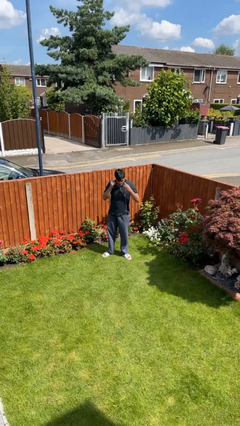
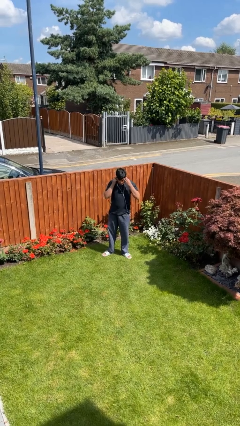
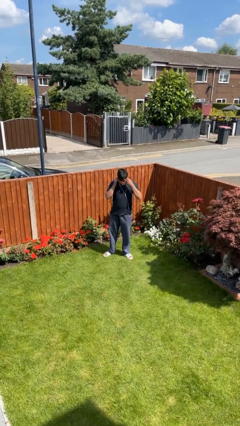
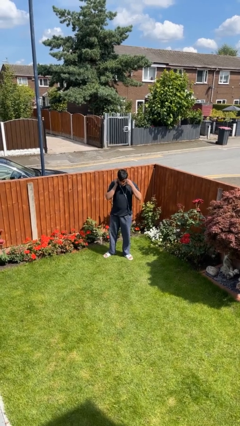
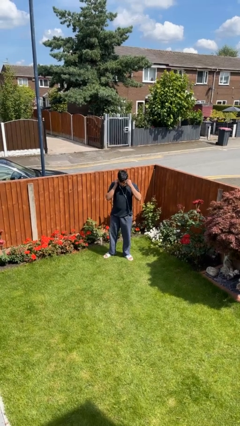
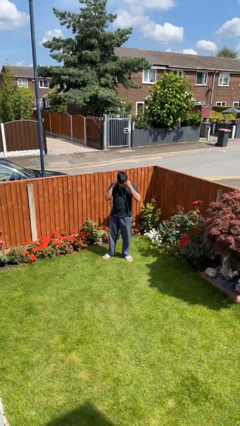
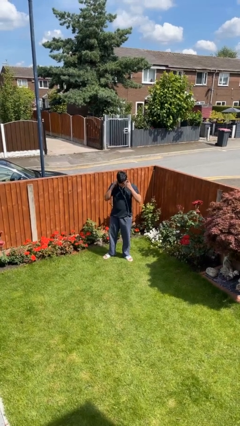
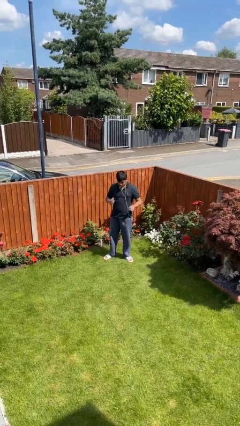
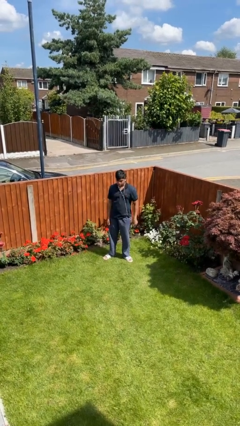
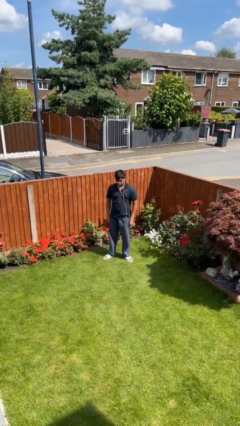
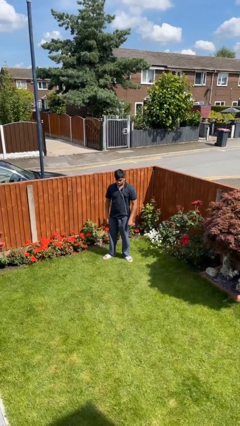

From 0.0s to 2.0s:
person puts on headphones

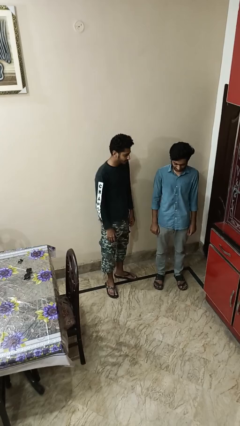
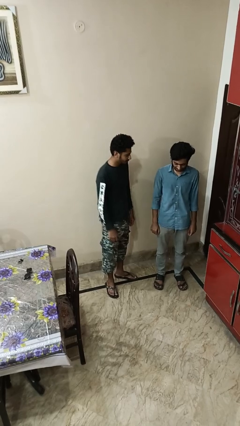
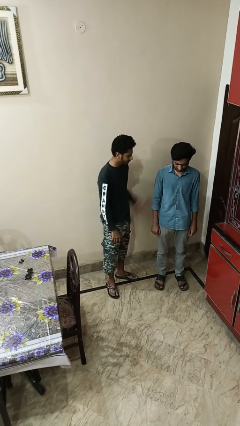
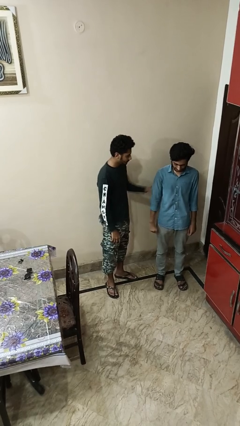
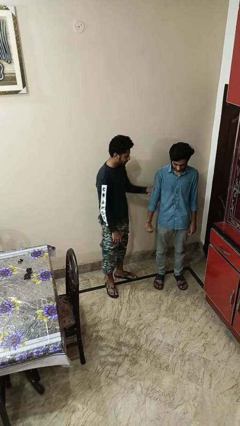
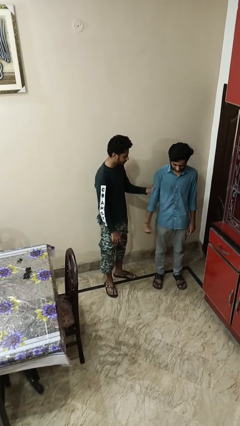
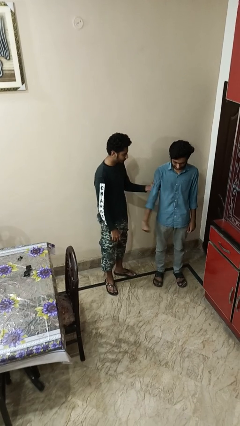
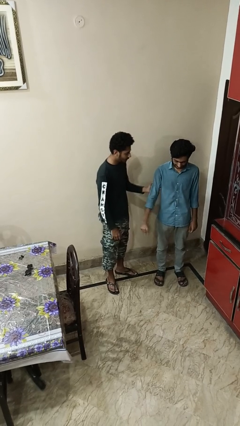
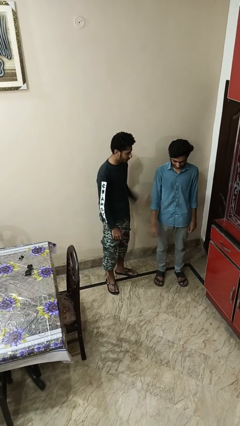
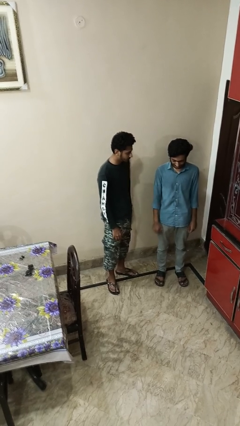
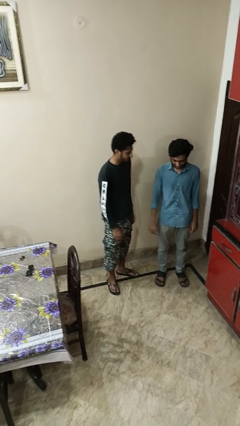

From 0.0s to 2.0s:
person grabs person by bicep

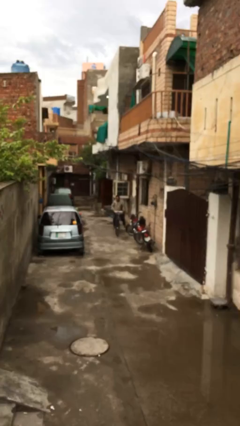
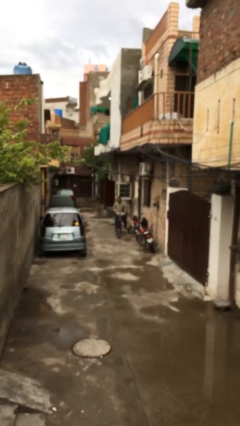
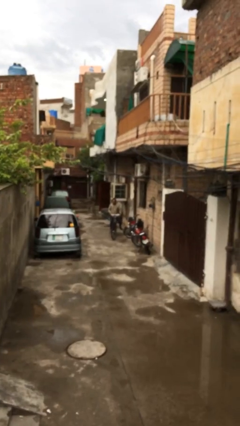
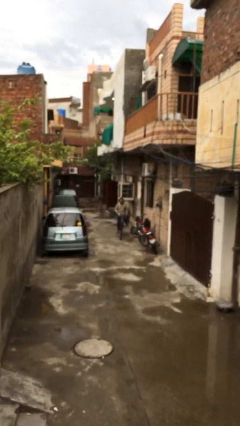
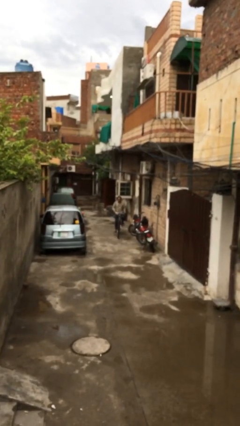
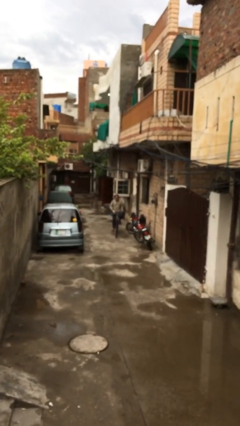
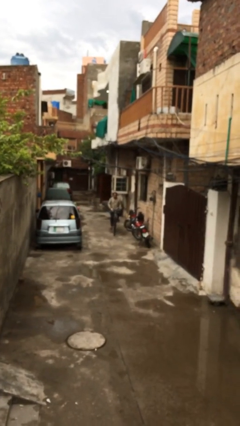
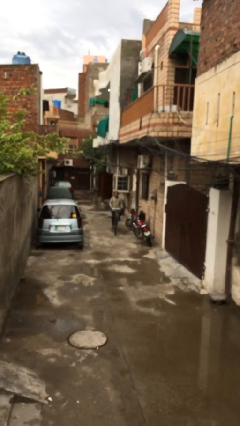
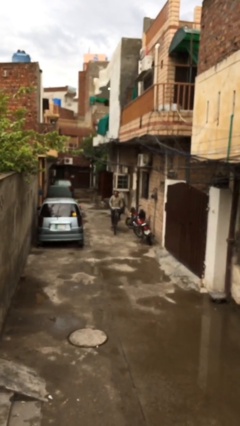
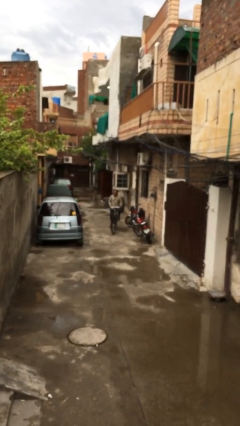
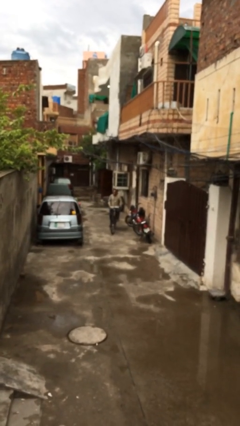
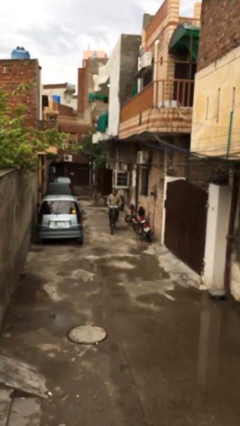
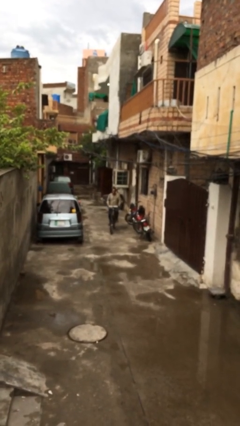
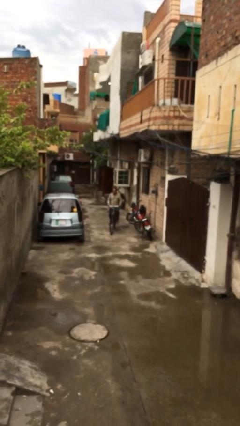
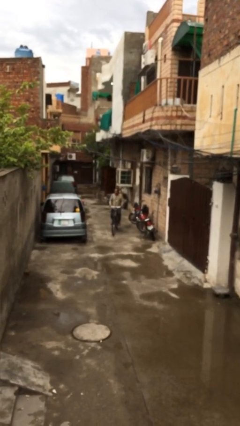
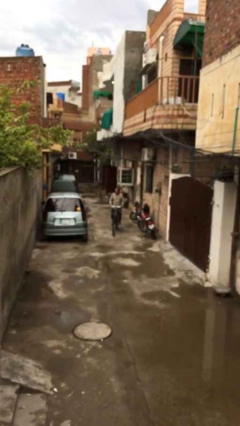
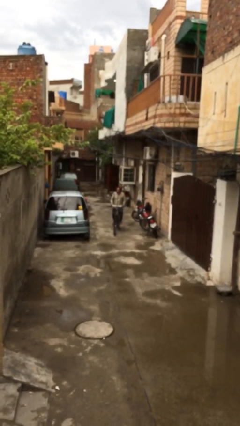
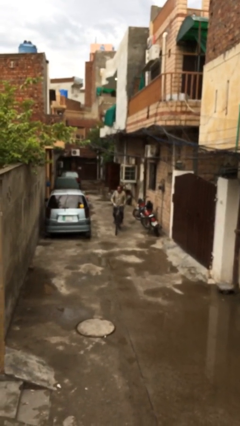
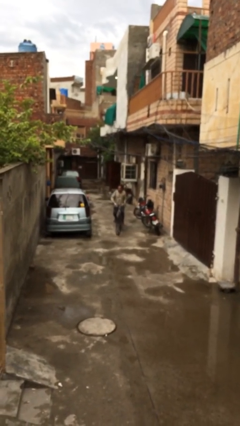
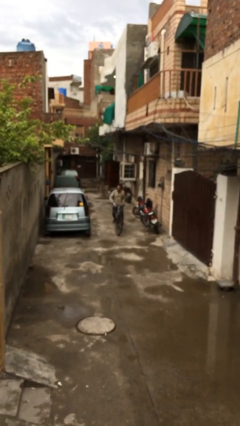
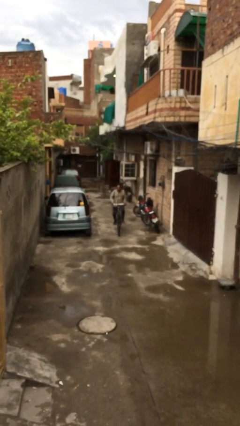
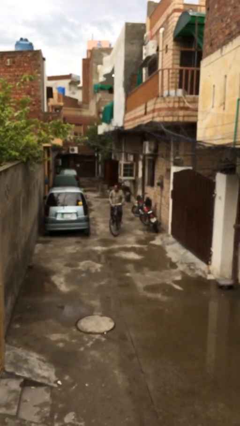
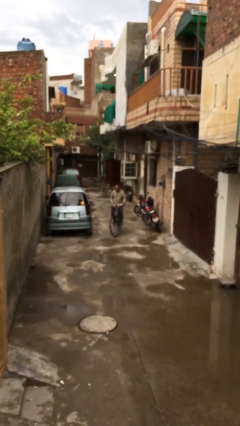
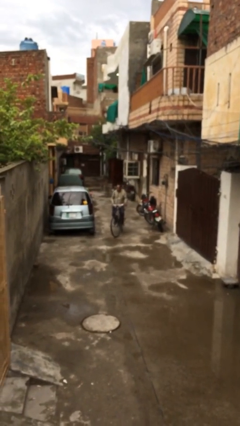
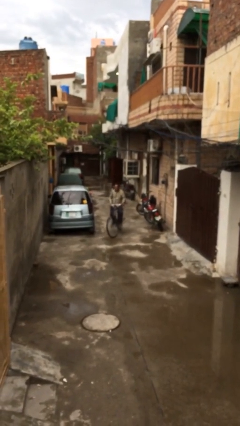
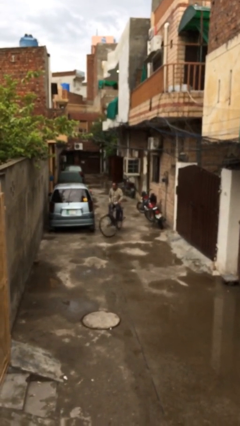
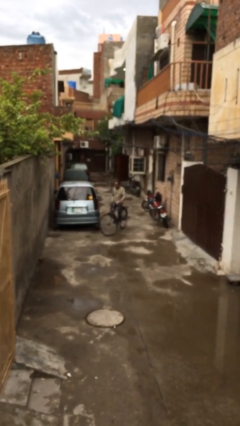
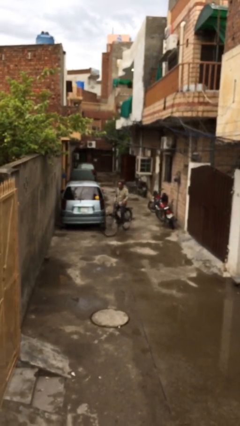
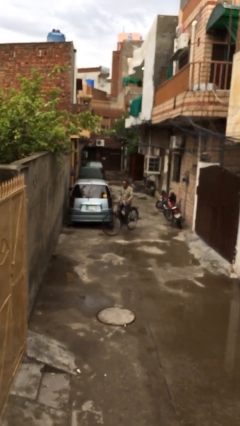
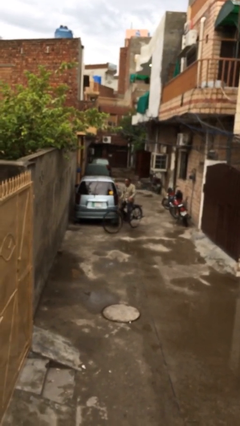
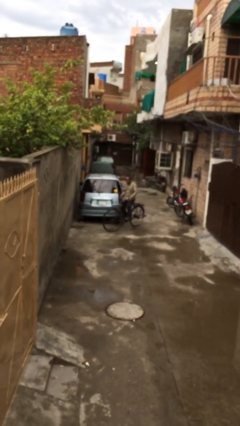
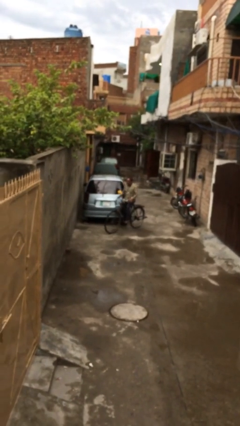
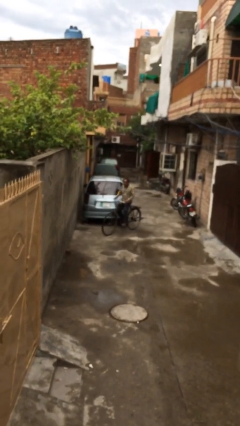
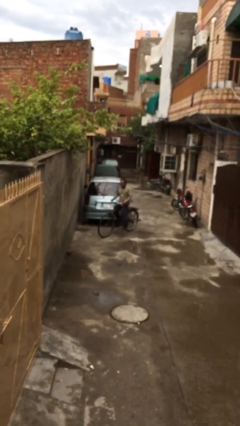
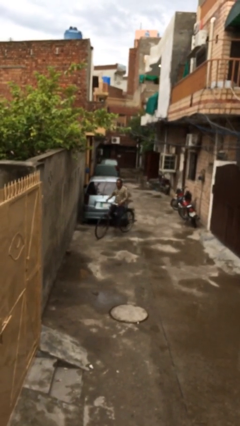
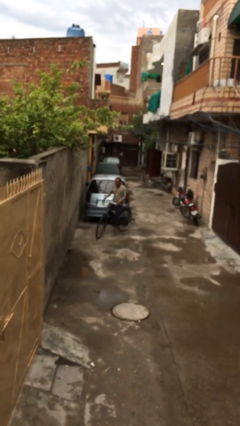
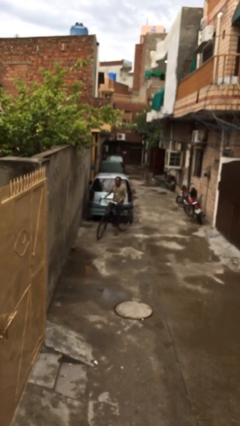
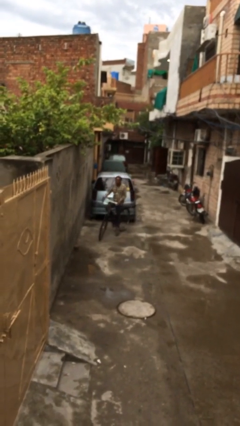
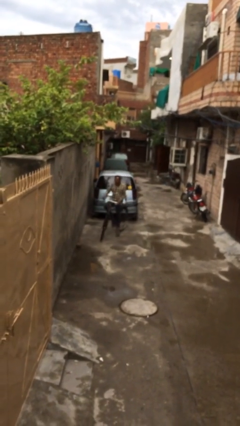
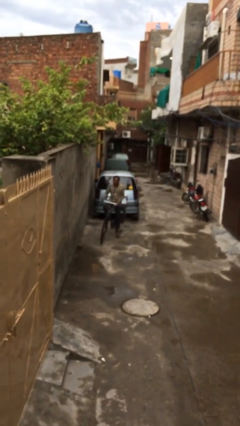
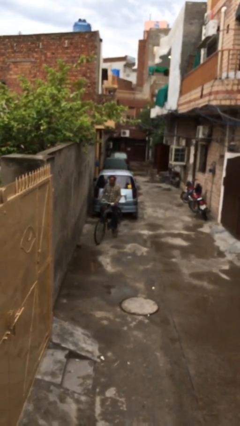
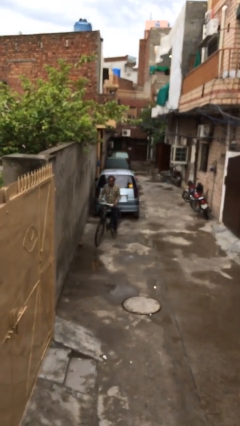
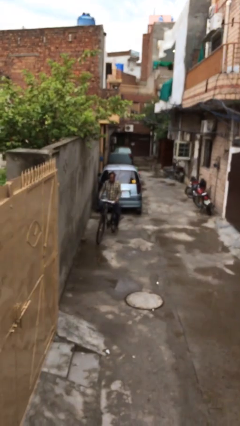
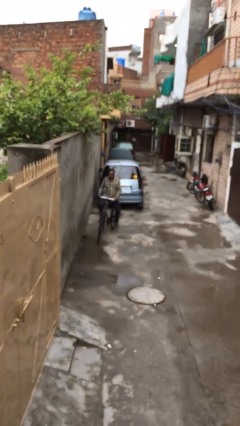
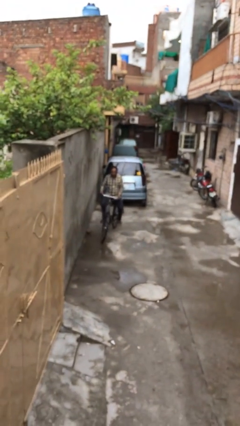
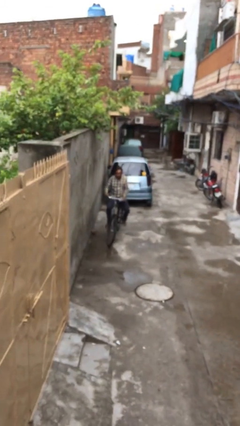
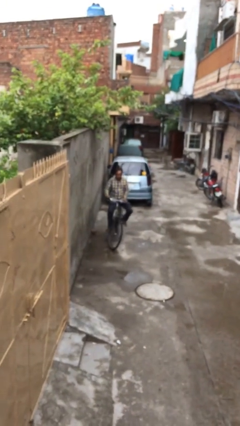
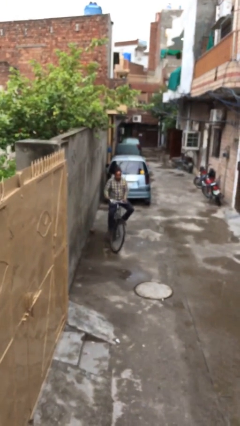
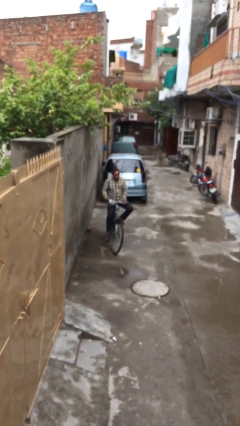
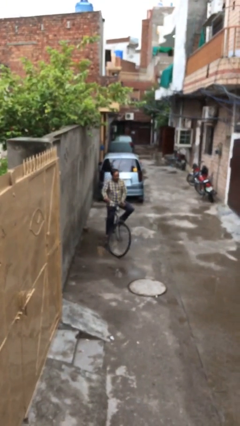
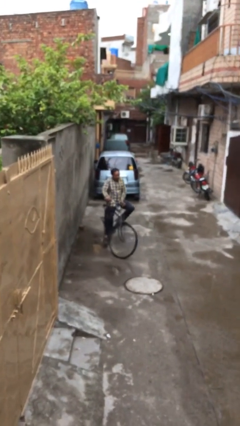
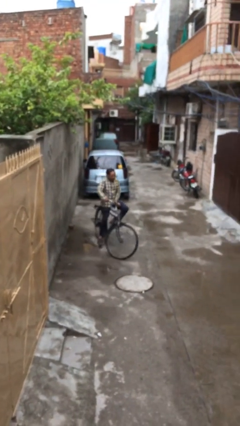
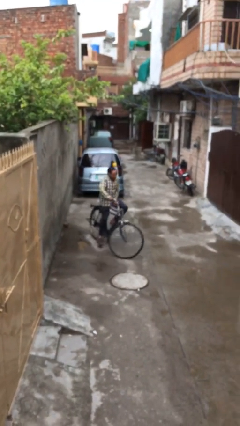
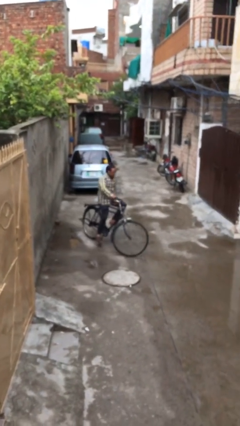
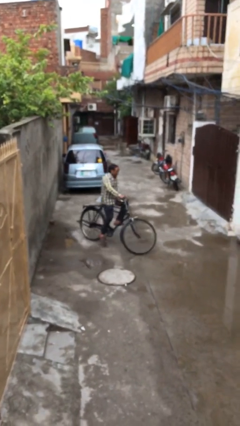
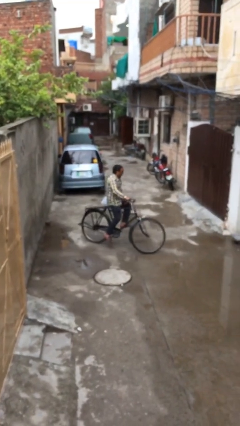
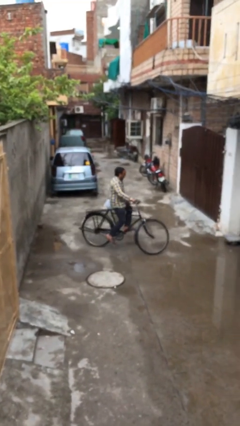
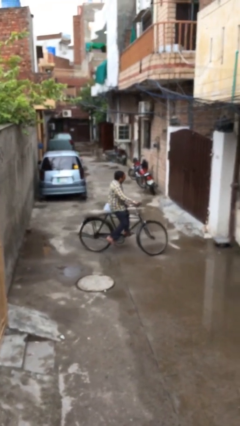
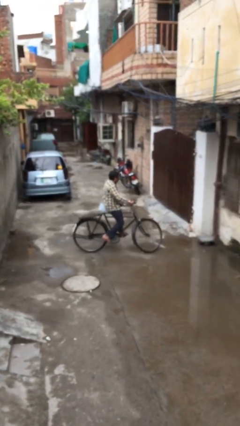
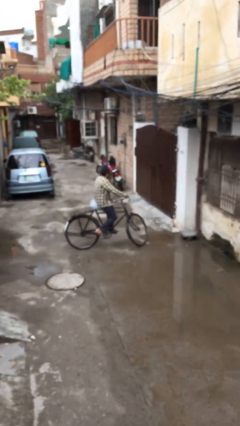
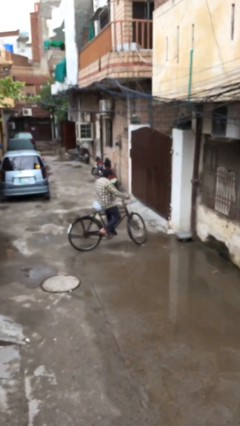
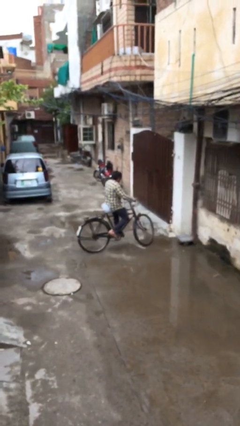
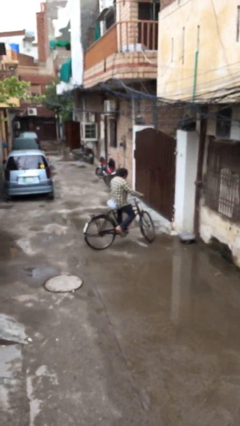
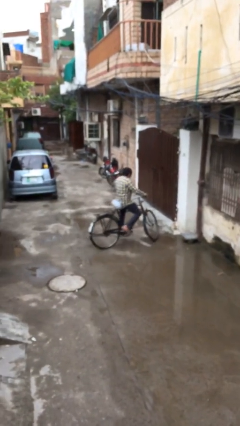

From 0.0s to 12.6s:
person rides bicycle

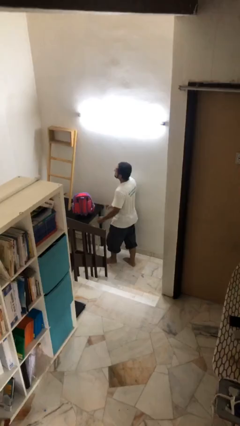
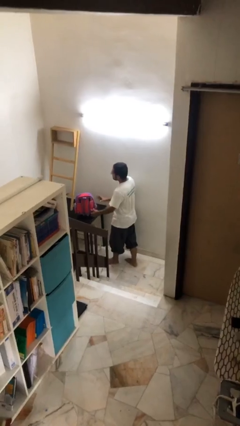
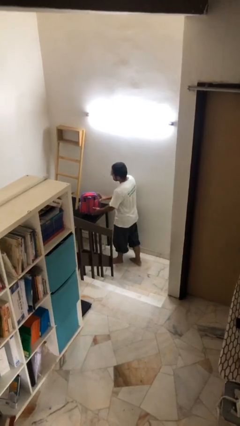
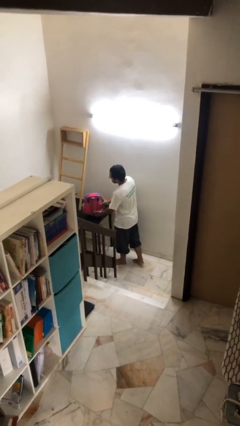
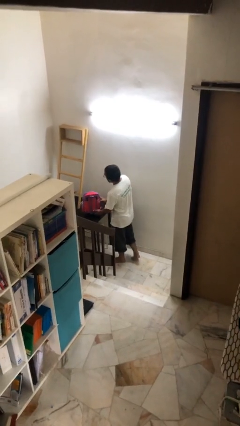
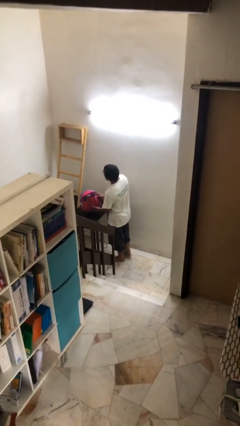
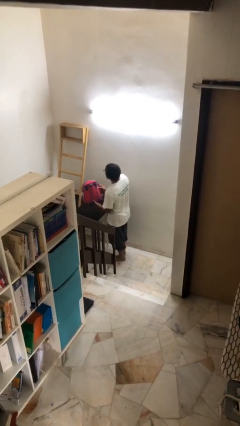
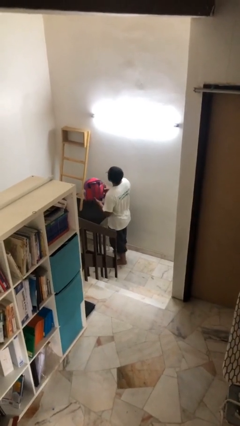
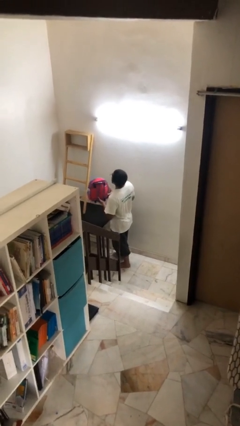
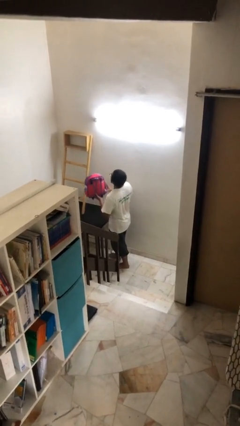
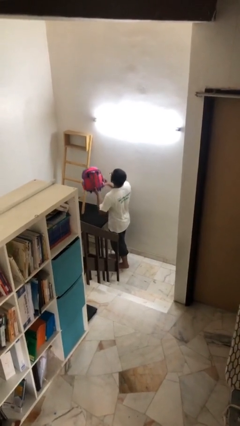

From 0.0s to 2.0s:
person picks up object from table
